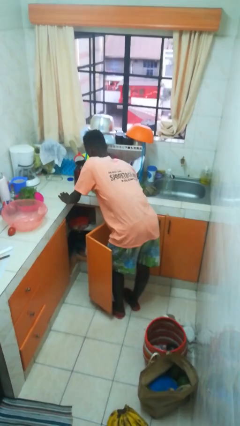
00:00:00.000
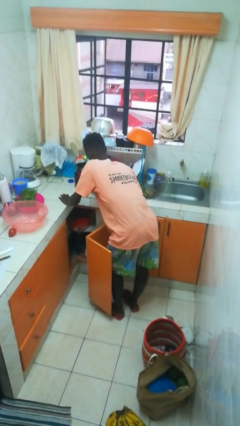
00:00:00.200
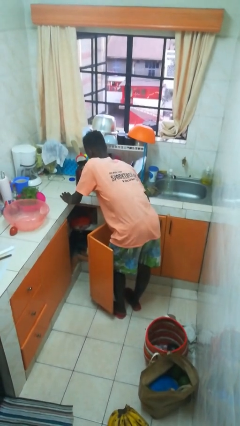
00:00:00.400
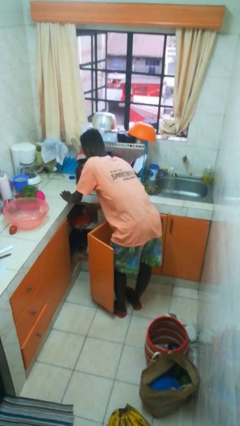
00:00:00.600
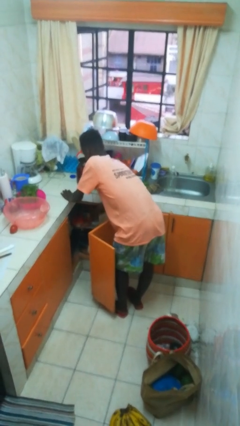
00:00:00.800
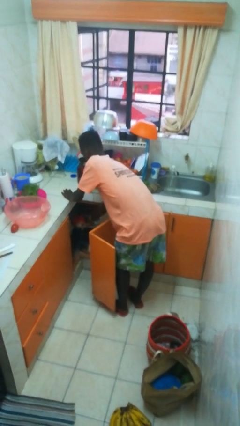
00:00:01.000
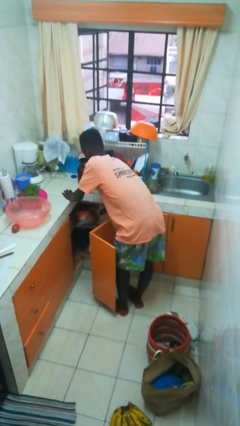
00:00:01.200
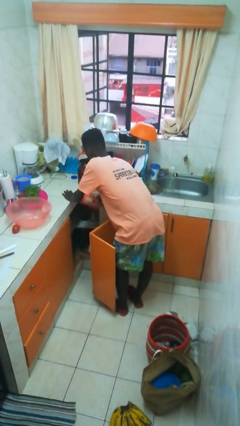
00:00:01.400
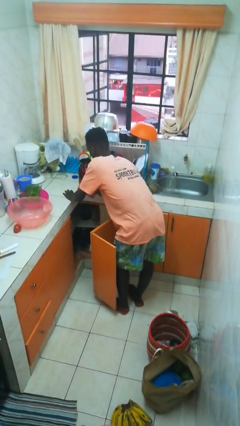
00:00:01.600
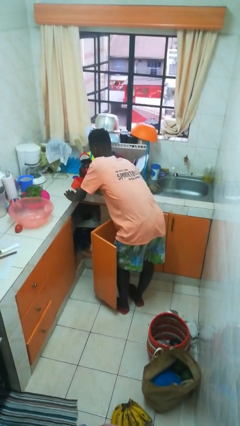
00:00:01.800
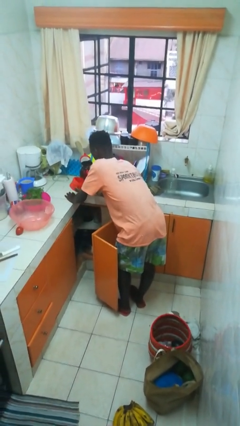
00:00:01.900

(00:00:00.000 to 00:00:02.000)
person takes object from cabinet

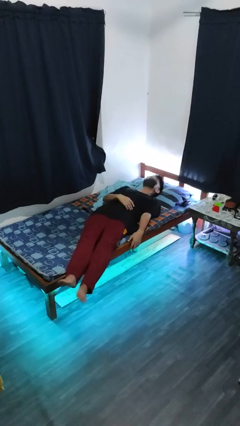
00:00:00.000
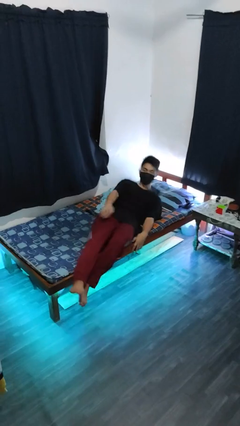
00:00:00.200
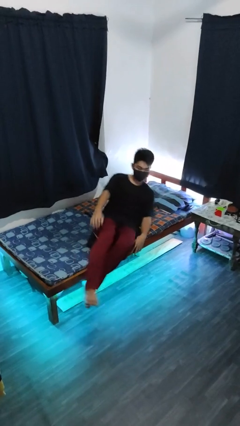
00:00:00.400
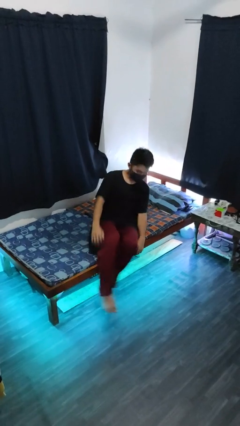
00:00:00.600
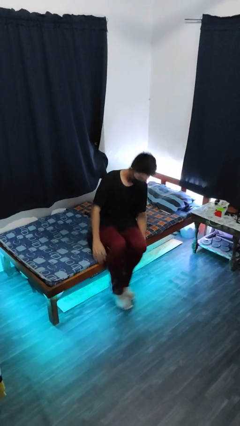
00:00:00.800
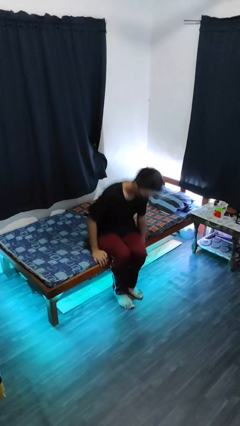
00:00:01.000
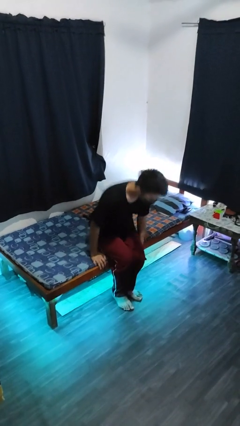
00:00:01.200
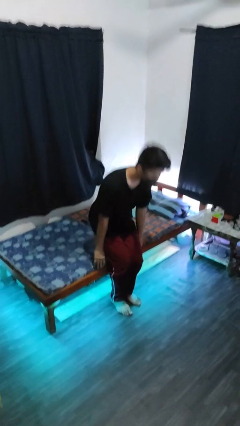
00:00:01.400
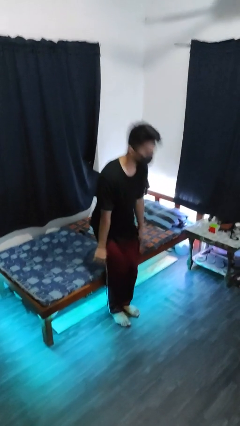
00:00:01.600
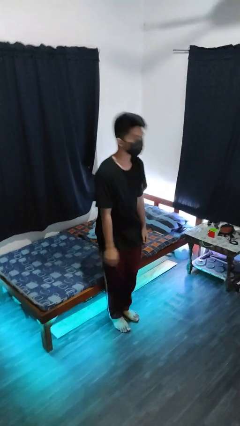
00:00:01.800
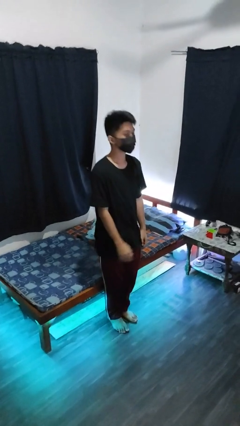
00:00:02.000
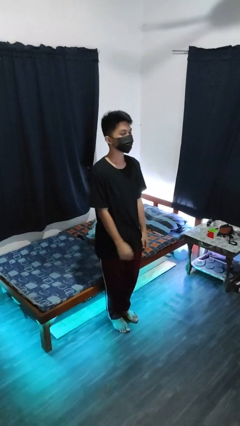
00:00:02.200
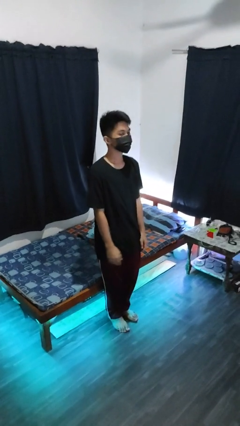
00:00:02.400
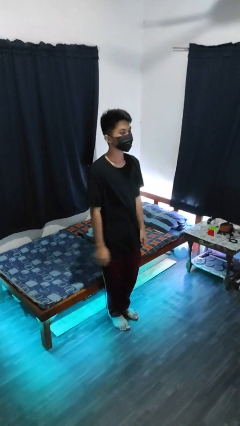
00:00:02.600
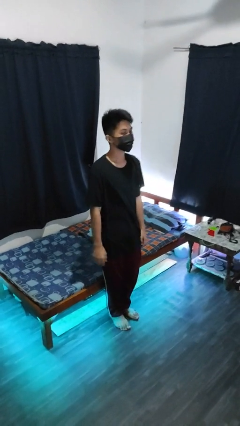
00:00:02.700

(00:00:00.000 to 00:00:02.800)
person stands up

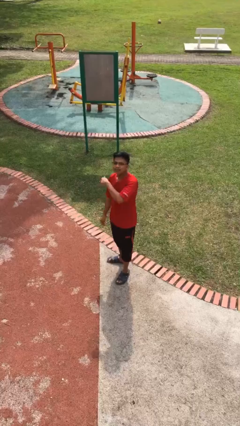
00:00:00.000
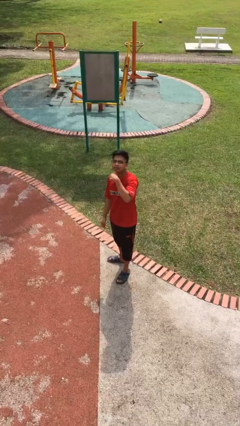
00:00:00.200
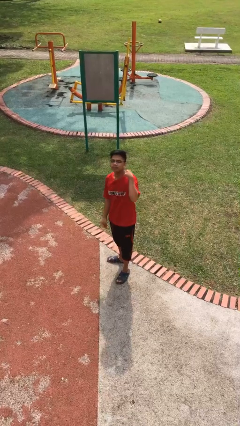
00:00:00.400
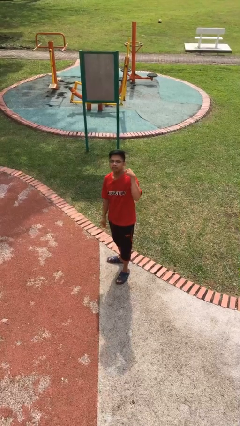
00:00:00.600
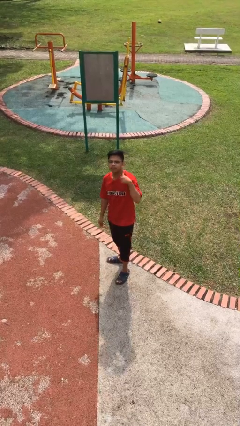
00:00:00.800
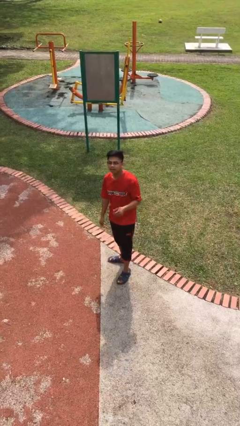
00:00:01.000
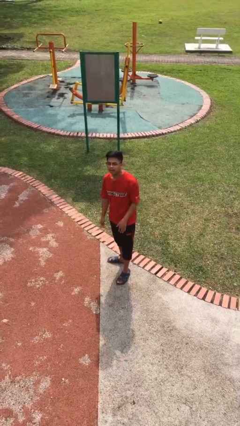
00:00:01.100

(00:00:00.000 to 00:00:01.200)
person gestures cut

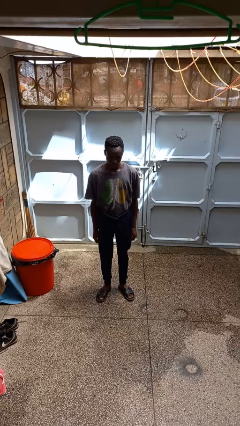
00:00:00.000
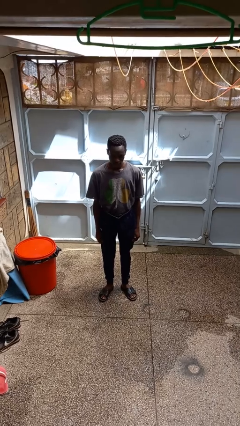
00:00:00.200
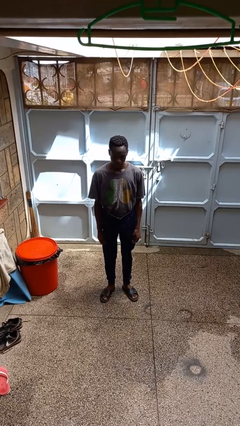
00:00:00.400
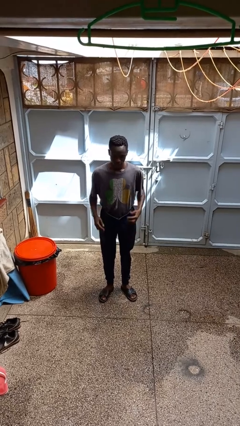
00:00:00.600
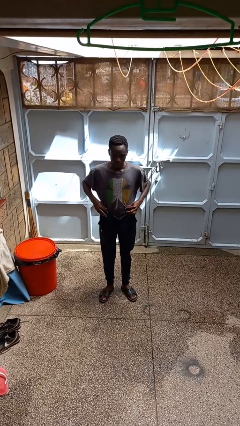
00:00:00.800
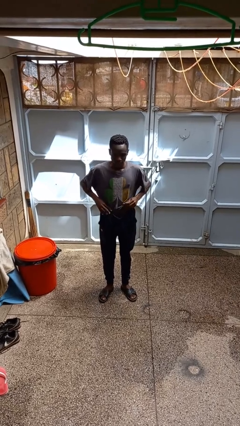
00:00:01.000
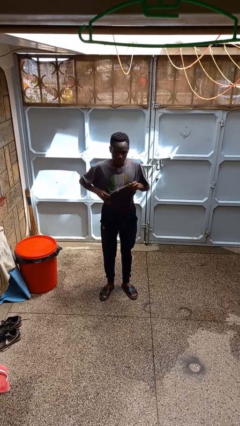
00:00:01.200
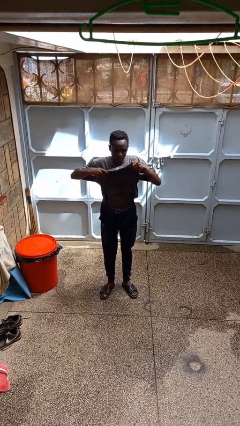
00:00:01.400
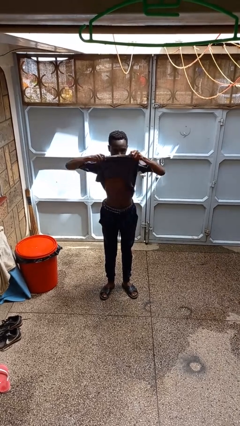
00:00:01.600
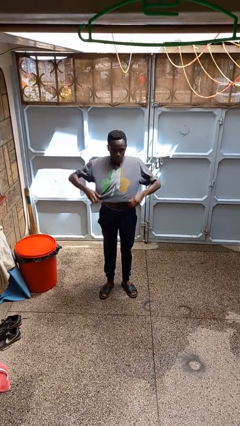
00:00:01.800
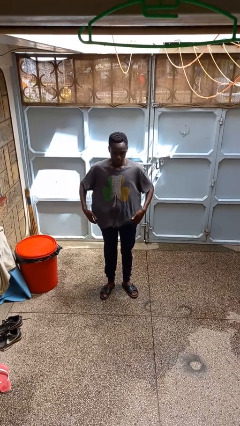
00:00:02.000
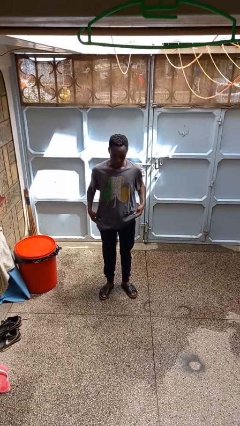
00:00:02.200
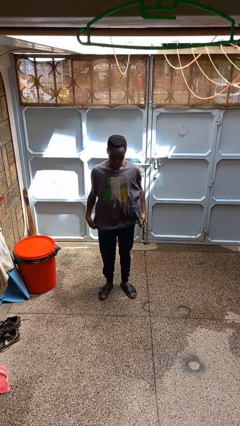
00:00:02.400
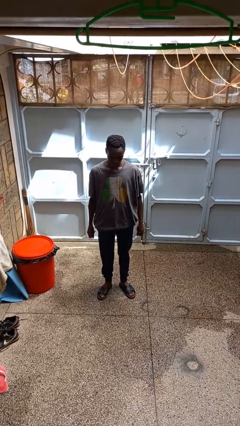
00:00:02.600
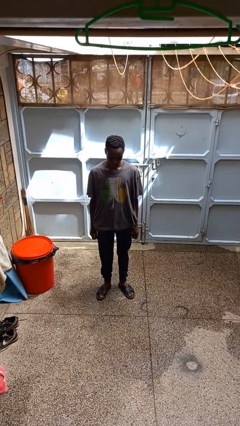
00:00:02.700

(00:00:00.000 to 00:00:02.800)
person untucks shirt

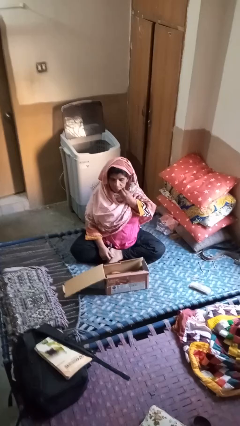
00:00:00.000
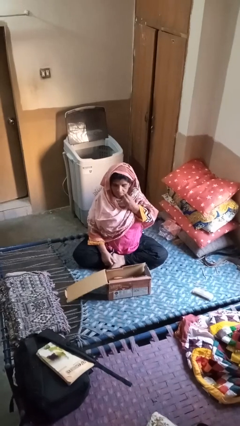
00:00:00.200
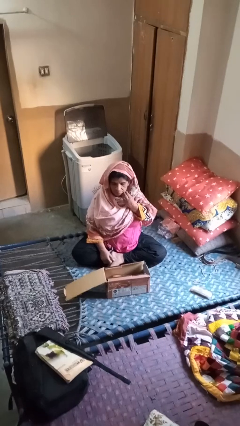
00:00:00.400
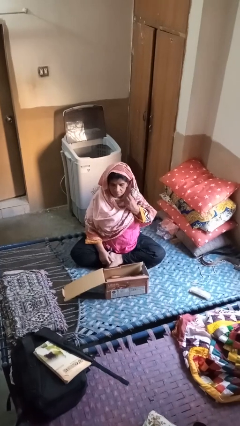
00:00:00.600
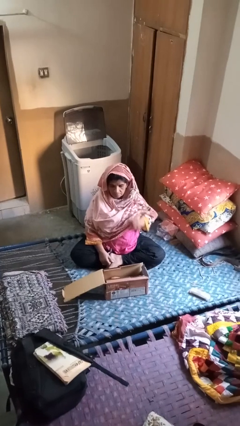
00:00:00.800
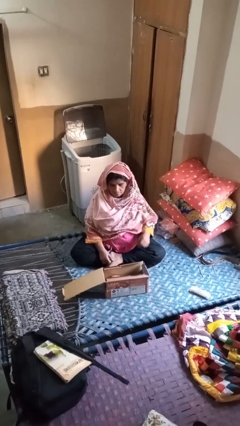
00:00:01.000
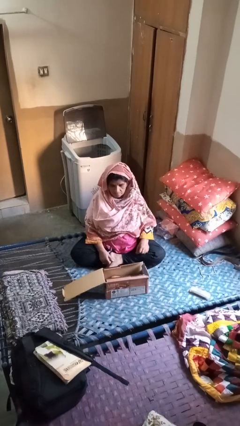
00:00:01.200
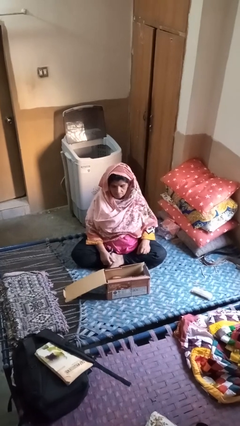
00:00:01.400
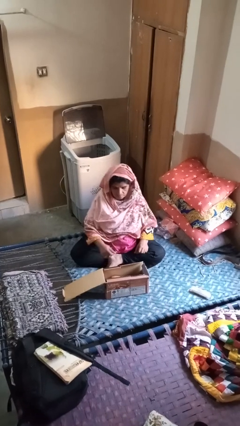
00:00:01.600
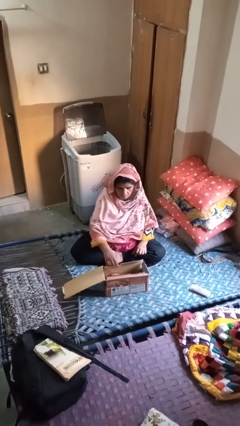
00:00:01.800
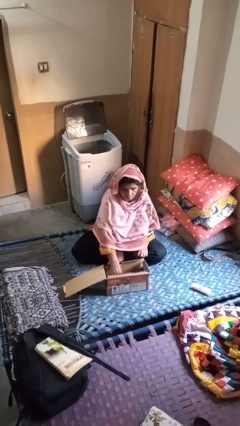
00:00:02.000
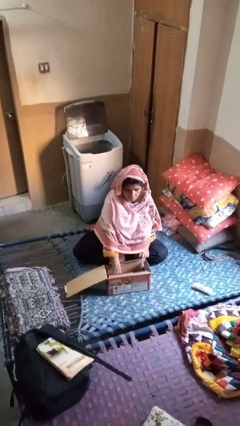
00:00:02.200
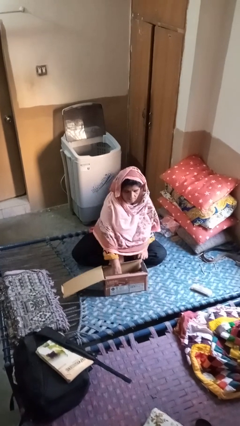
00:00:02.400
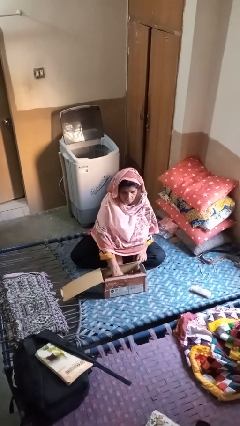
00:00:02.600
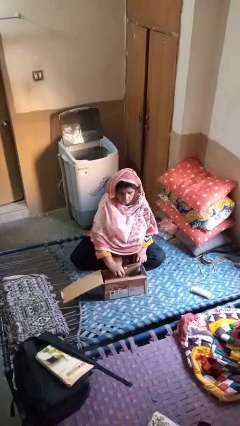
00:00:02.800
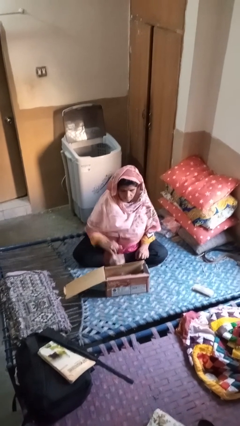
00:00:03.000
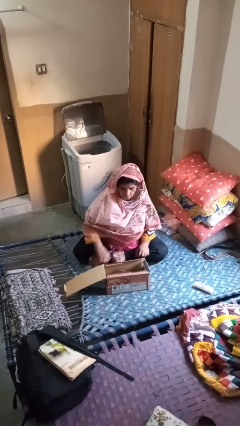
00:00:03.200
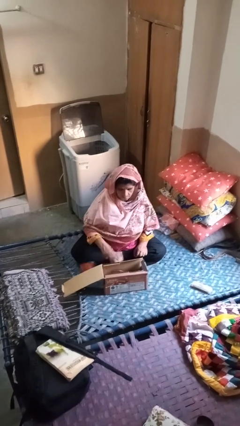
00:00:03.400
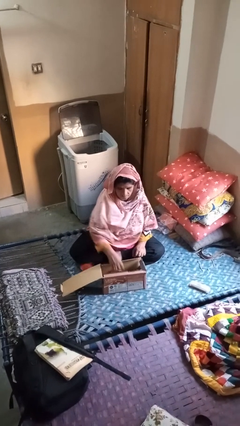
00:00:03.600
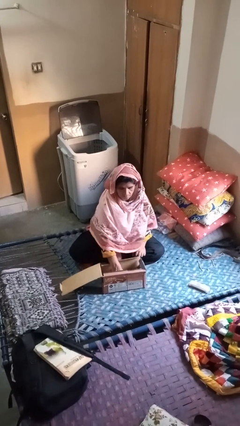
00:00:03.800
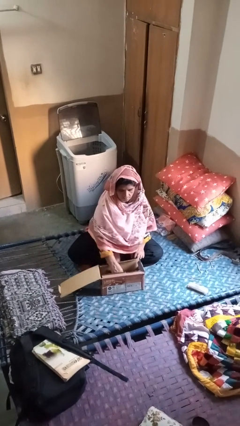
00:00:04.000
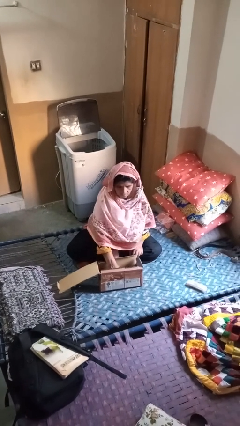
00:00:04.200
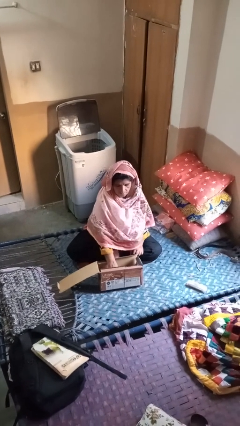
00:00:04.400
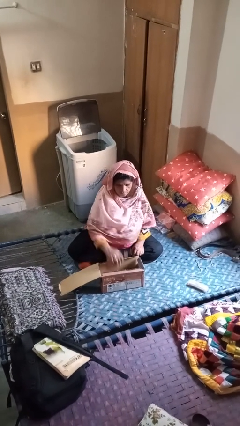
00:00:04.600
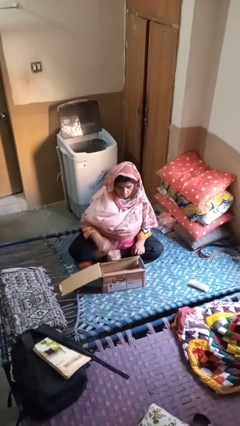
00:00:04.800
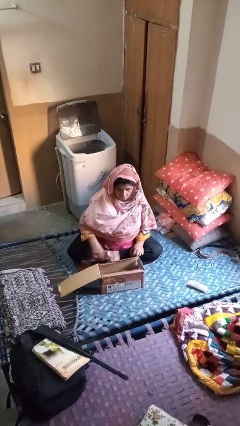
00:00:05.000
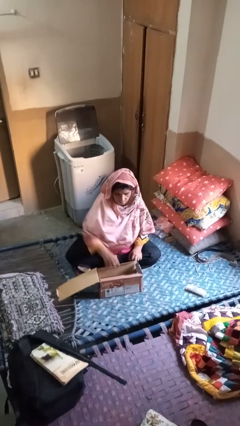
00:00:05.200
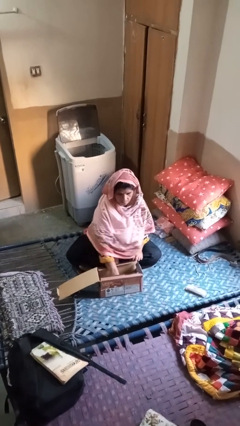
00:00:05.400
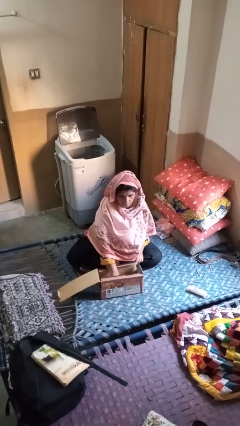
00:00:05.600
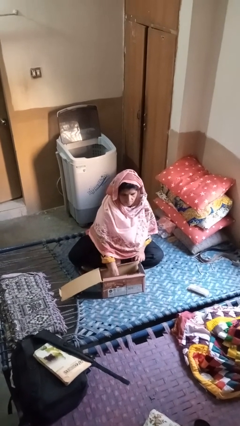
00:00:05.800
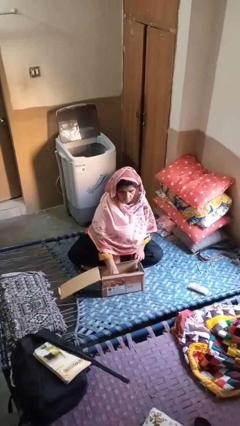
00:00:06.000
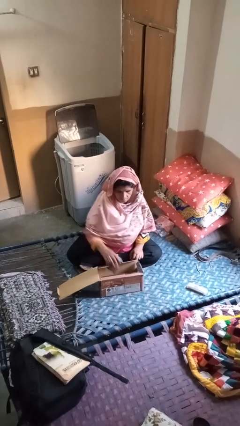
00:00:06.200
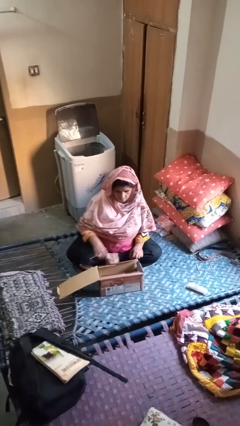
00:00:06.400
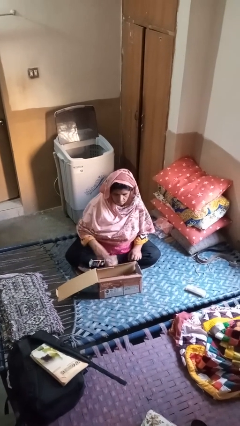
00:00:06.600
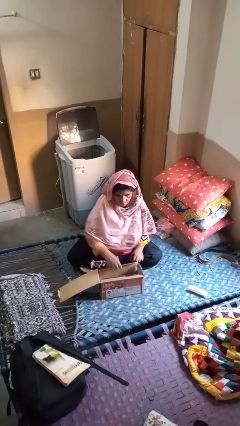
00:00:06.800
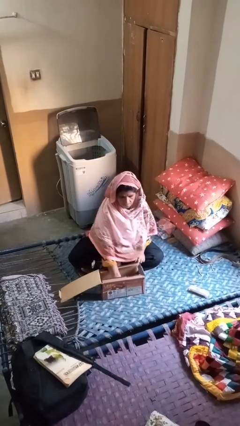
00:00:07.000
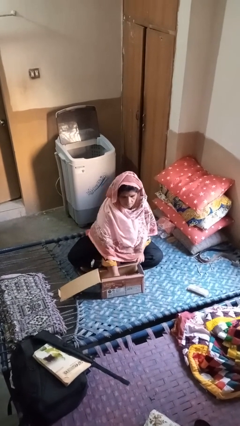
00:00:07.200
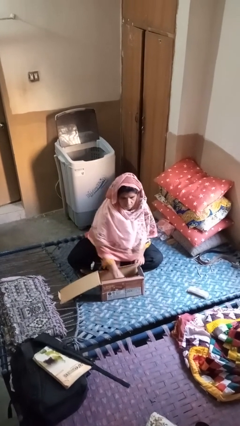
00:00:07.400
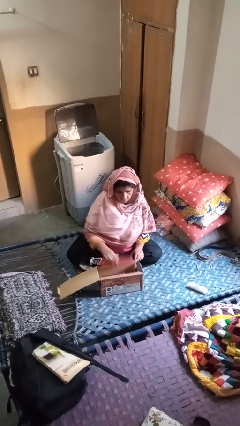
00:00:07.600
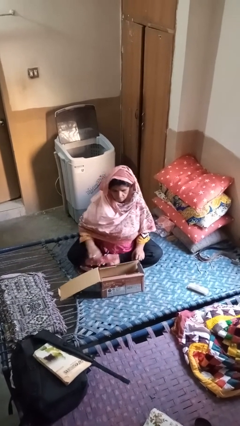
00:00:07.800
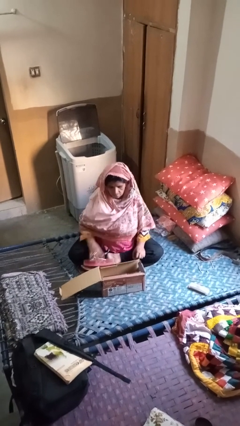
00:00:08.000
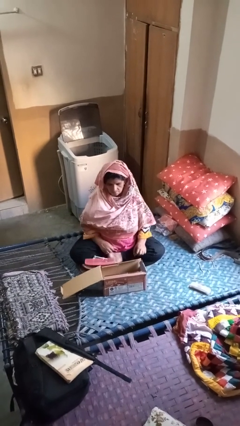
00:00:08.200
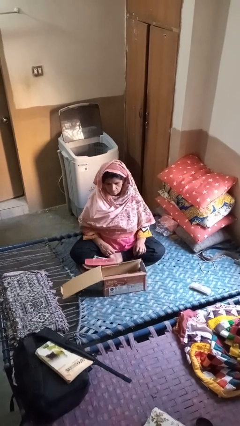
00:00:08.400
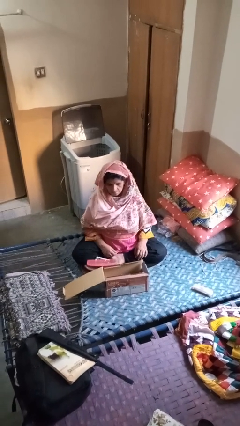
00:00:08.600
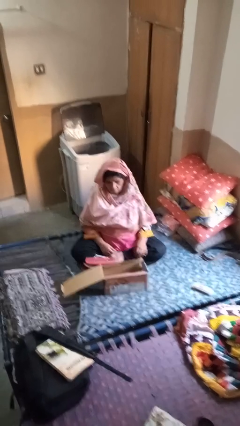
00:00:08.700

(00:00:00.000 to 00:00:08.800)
person takes object from box
